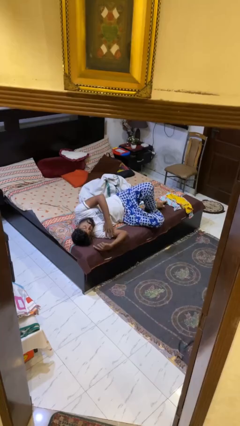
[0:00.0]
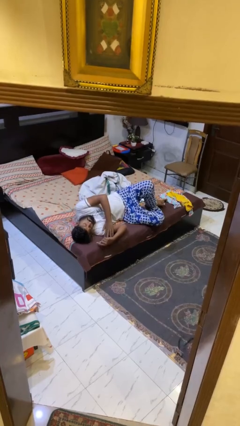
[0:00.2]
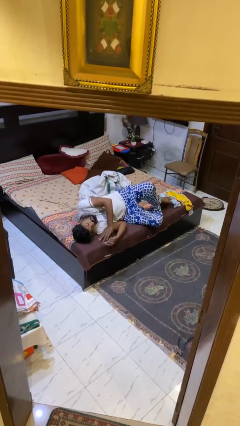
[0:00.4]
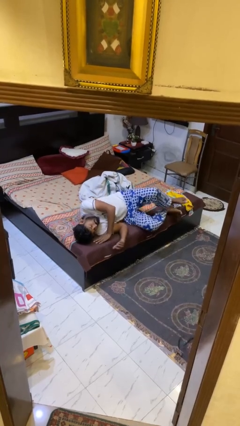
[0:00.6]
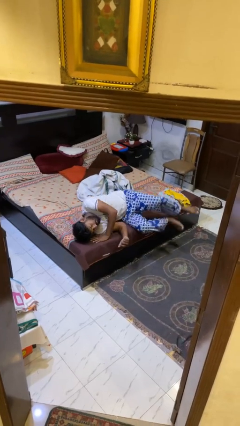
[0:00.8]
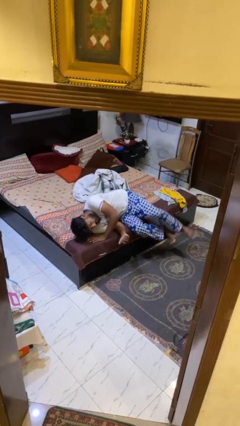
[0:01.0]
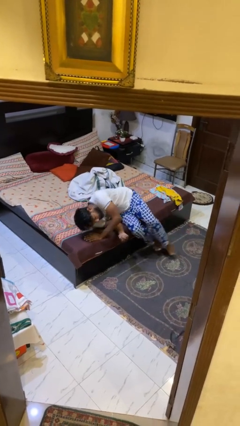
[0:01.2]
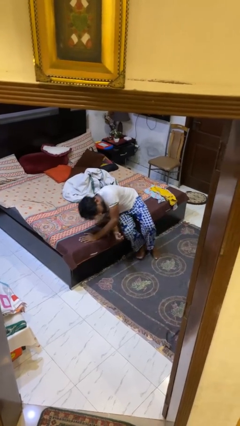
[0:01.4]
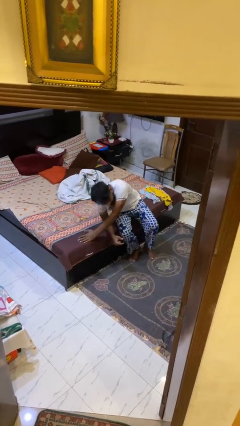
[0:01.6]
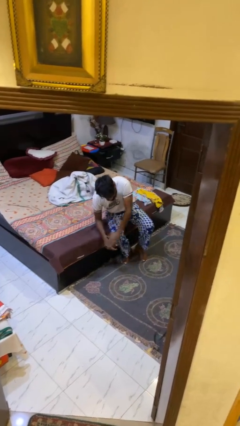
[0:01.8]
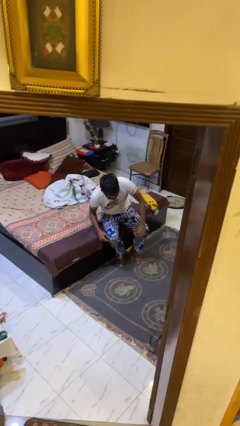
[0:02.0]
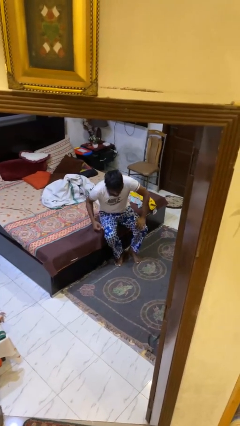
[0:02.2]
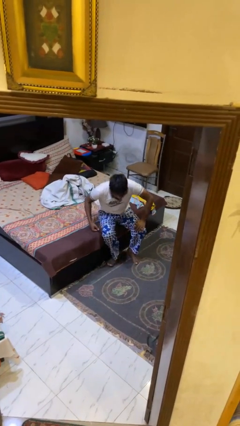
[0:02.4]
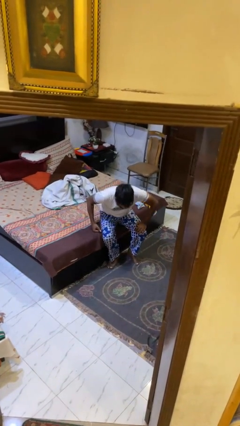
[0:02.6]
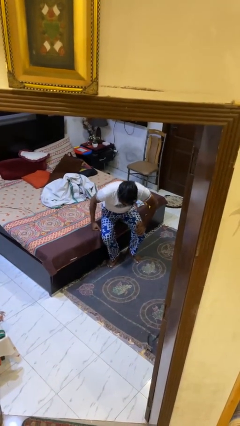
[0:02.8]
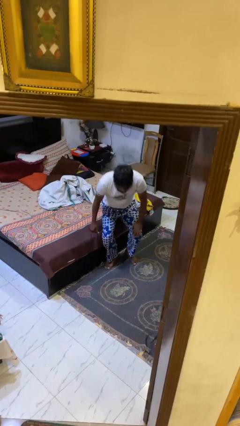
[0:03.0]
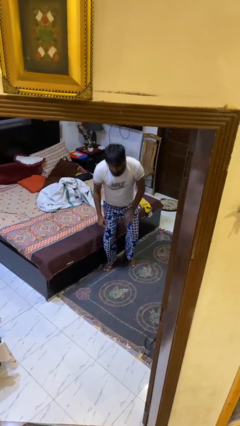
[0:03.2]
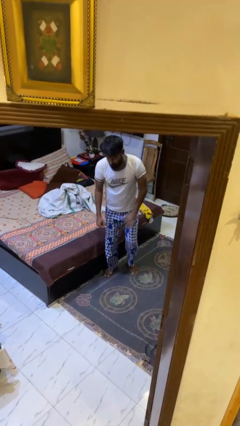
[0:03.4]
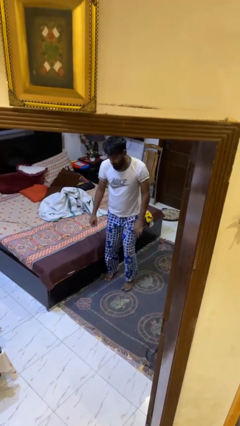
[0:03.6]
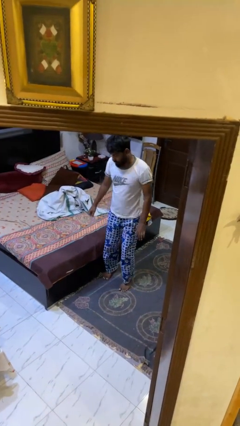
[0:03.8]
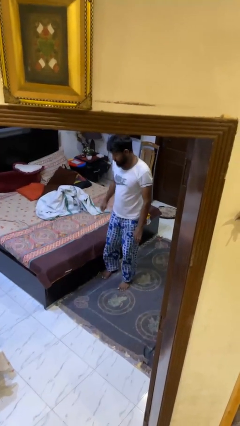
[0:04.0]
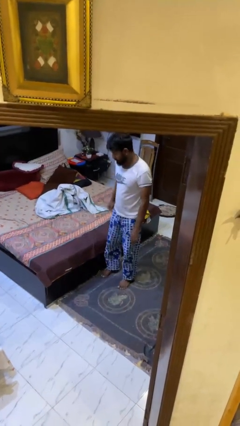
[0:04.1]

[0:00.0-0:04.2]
person stands up

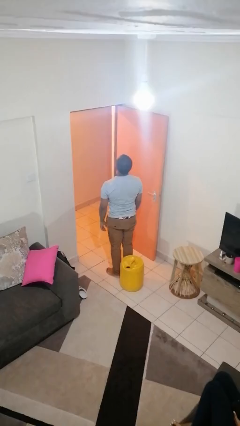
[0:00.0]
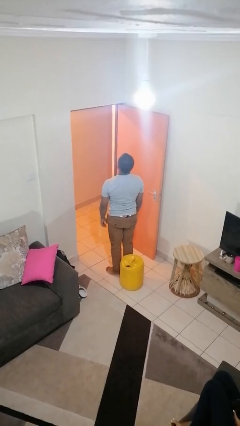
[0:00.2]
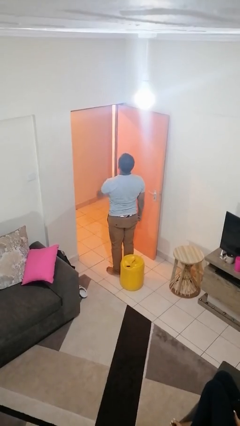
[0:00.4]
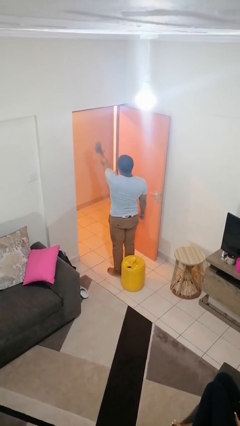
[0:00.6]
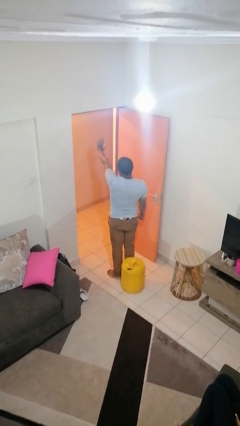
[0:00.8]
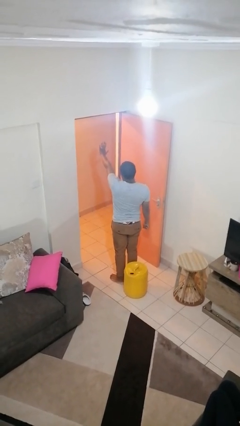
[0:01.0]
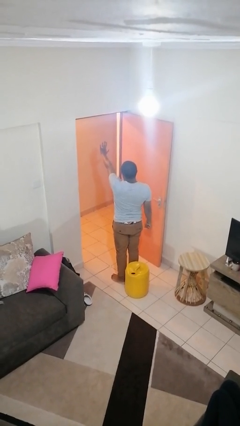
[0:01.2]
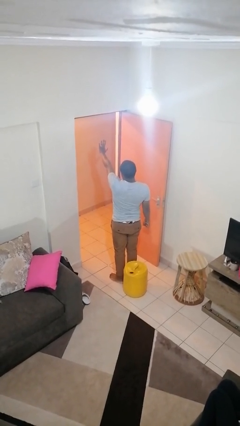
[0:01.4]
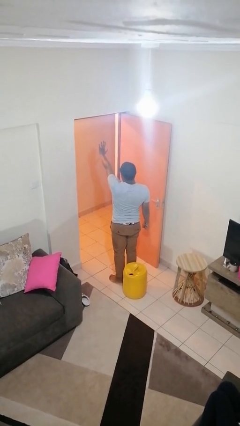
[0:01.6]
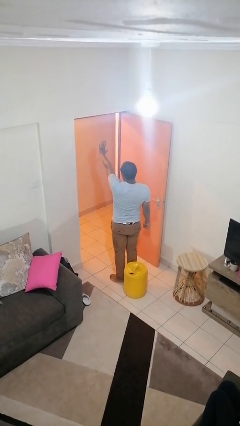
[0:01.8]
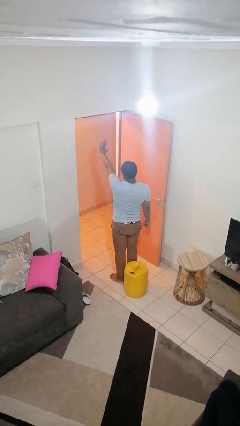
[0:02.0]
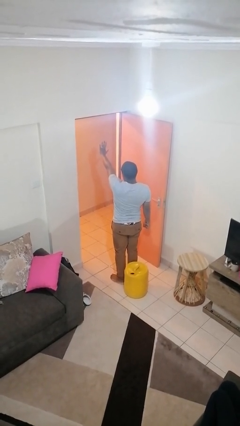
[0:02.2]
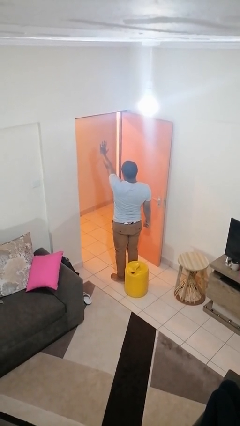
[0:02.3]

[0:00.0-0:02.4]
person gestures stop

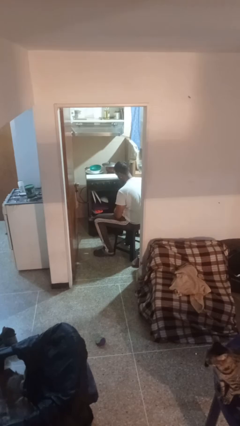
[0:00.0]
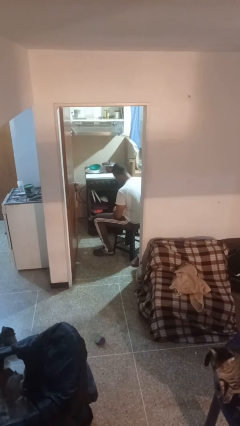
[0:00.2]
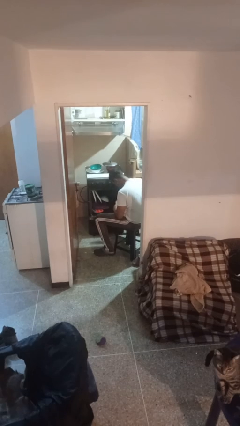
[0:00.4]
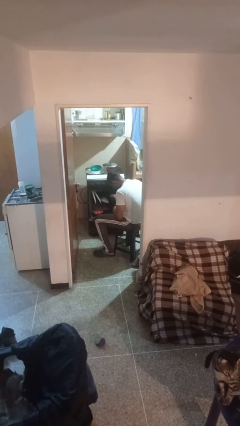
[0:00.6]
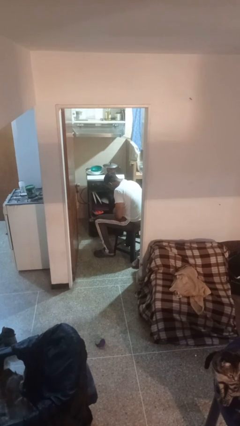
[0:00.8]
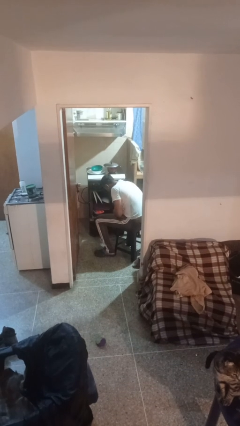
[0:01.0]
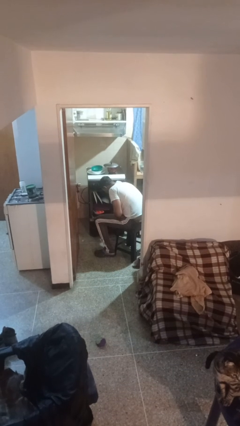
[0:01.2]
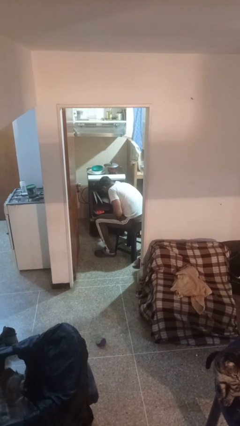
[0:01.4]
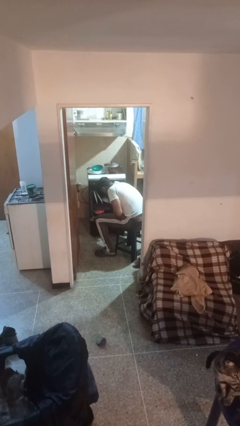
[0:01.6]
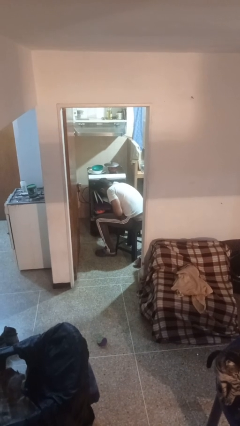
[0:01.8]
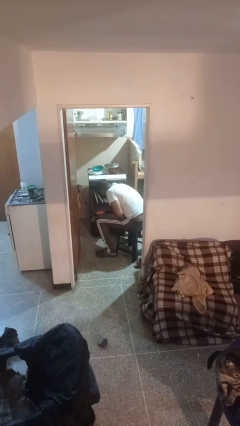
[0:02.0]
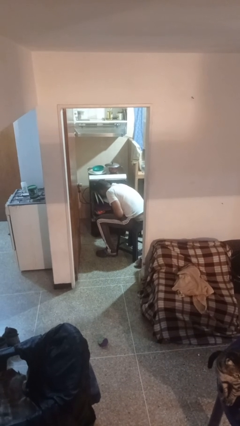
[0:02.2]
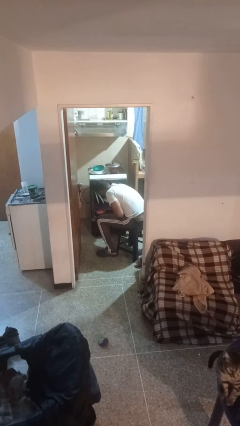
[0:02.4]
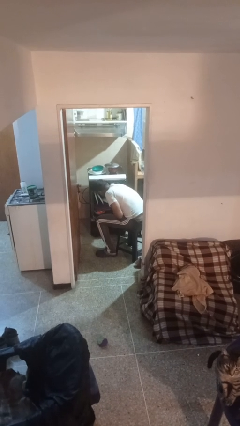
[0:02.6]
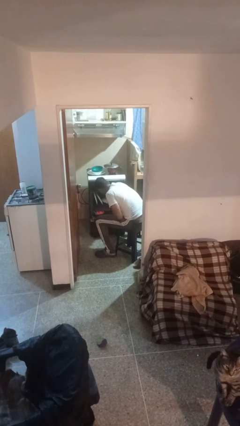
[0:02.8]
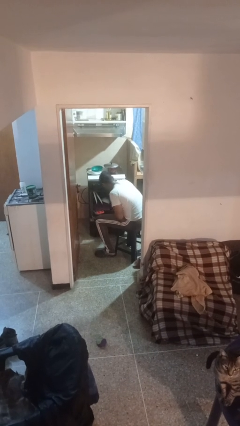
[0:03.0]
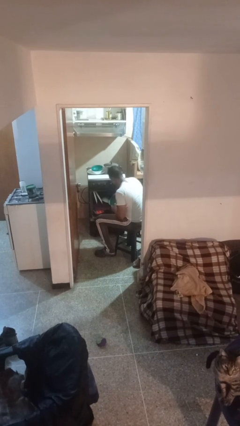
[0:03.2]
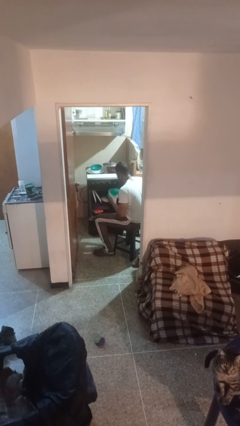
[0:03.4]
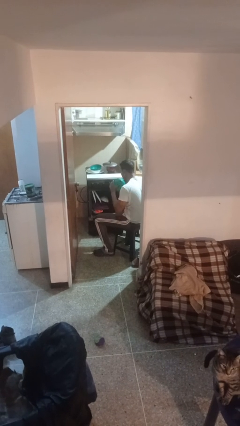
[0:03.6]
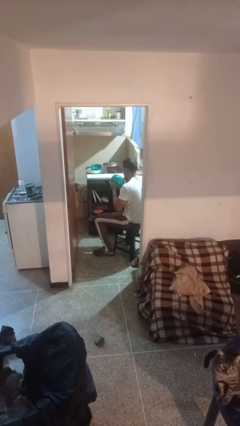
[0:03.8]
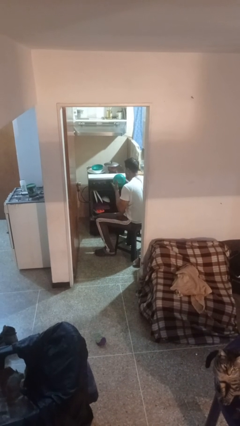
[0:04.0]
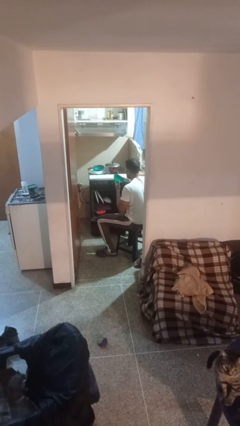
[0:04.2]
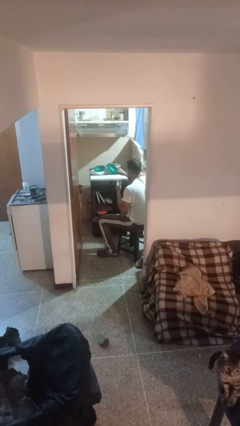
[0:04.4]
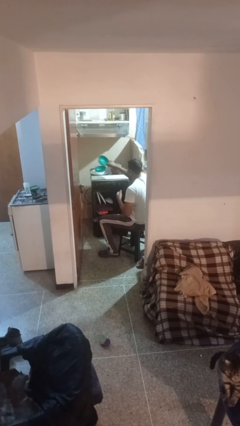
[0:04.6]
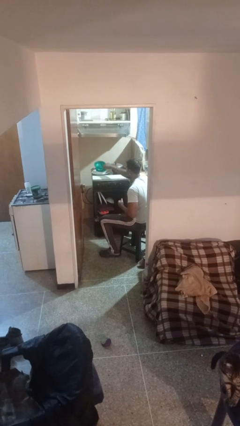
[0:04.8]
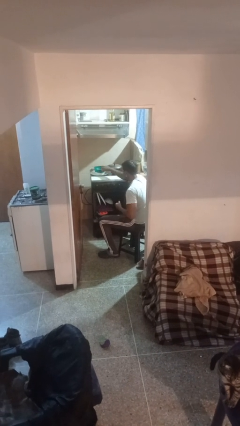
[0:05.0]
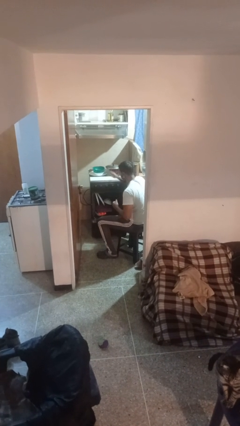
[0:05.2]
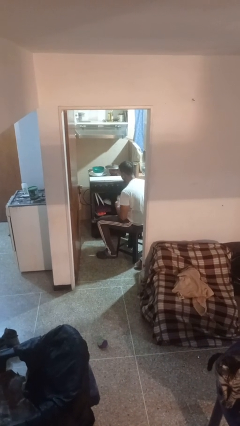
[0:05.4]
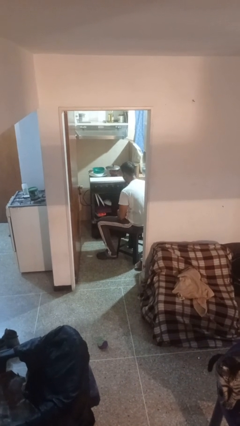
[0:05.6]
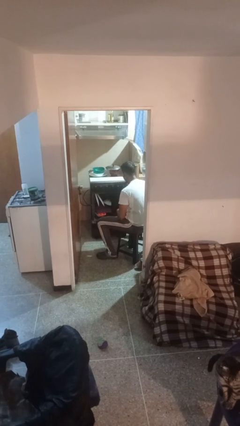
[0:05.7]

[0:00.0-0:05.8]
person unloads dishwasher

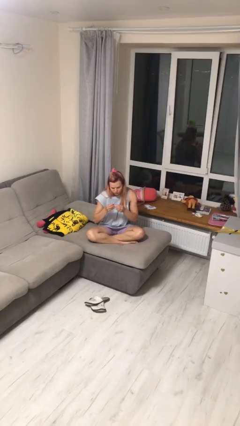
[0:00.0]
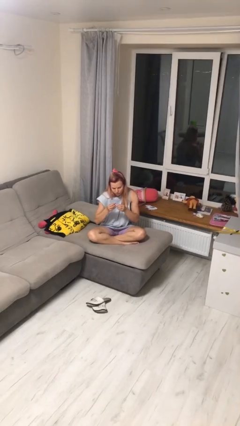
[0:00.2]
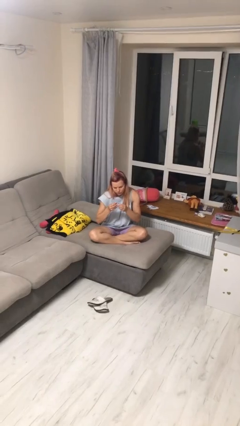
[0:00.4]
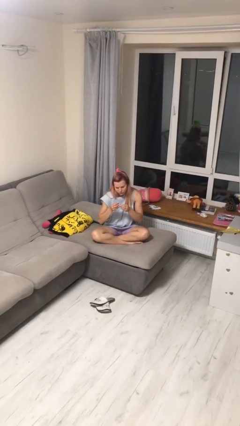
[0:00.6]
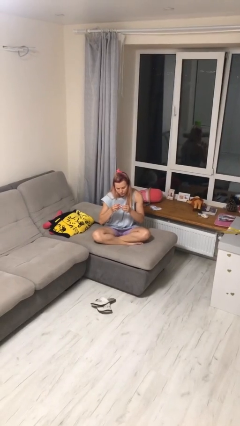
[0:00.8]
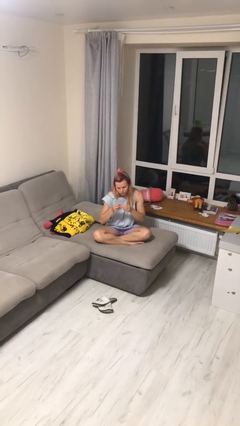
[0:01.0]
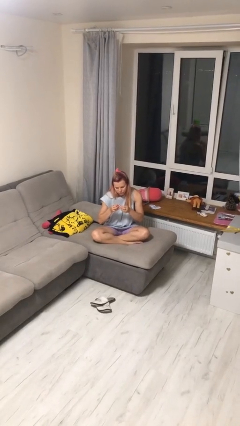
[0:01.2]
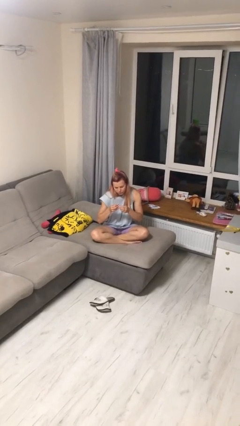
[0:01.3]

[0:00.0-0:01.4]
person clips fingernails

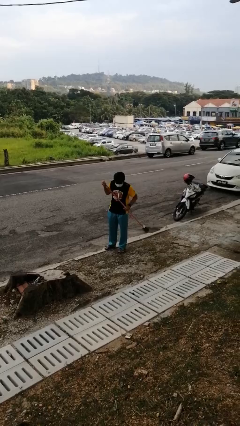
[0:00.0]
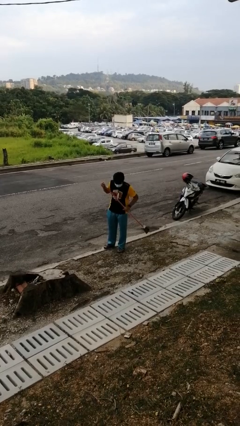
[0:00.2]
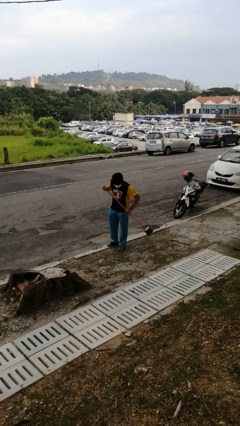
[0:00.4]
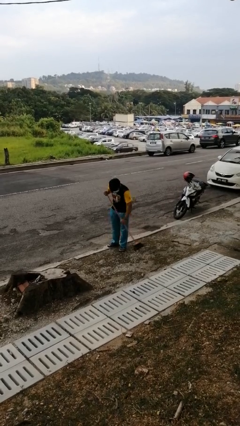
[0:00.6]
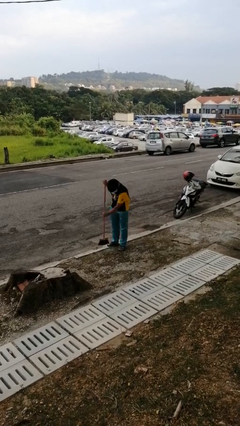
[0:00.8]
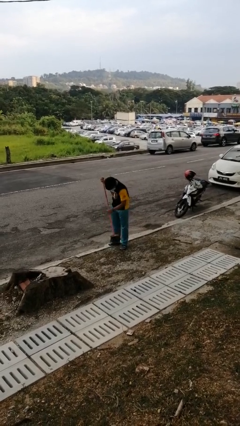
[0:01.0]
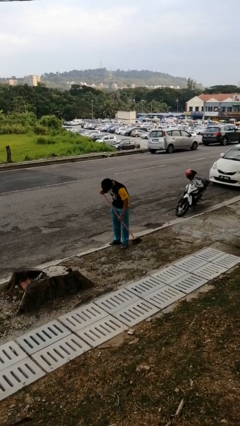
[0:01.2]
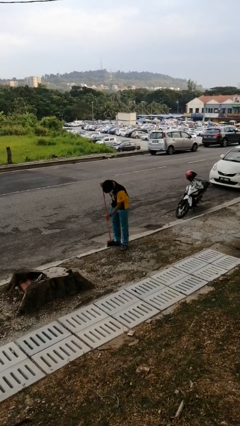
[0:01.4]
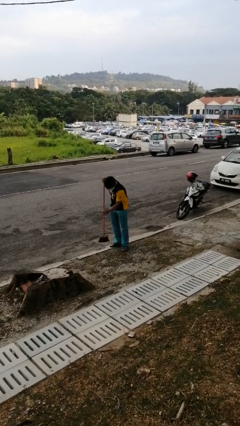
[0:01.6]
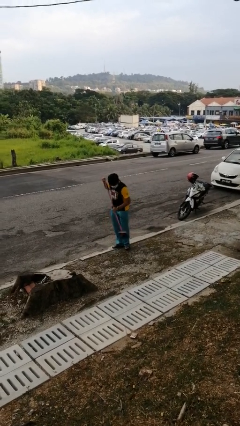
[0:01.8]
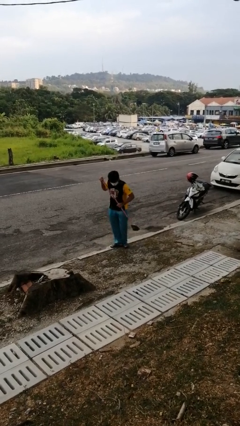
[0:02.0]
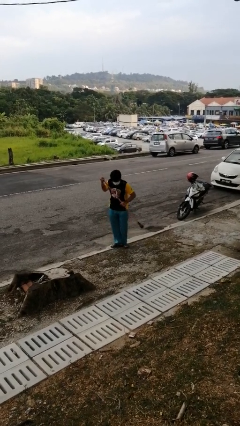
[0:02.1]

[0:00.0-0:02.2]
person sweeps floor

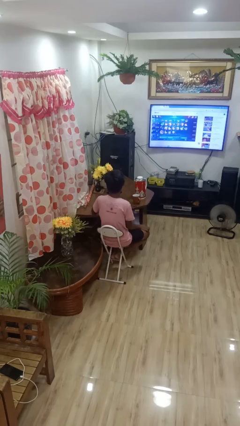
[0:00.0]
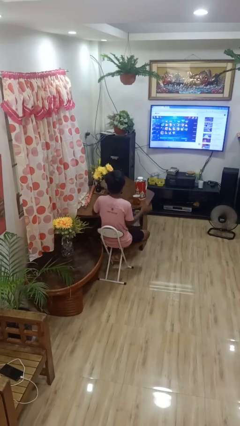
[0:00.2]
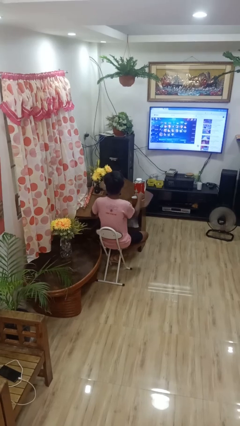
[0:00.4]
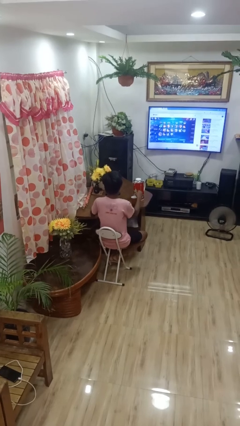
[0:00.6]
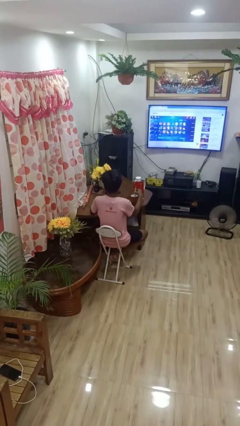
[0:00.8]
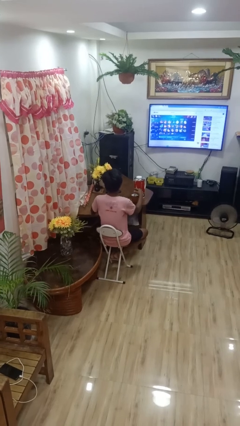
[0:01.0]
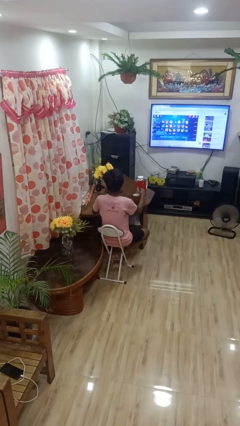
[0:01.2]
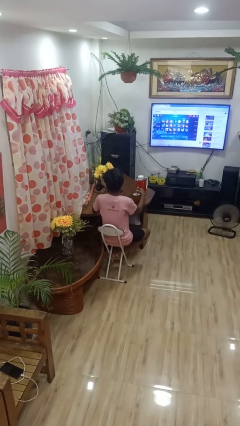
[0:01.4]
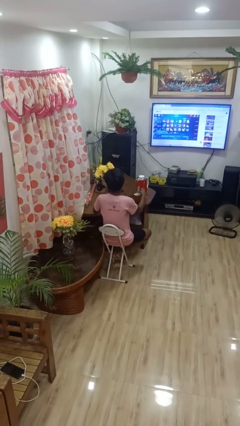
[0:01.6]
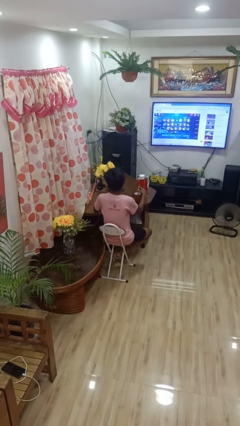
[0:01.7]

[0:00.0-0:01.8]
person stirs mug
